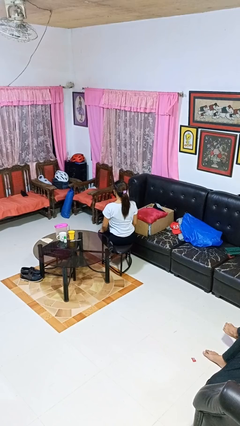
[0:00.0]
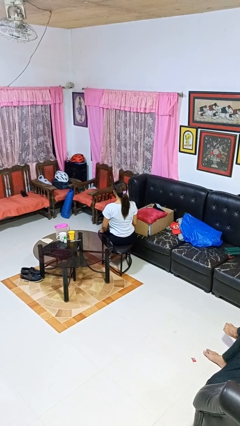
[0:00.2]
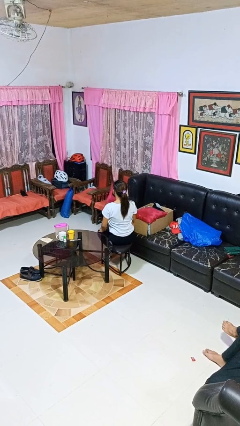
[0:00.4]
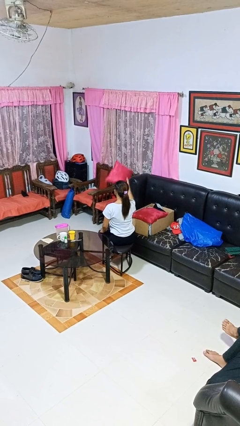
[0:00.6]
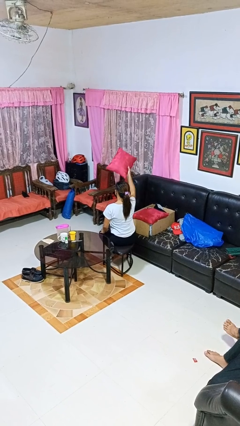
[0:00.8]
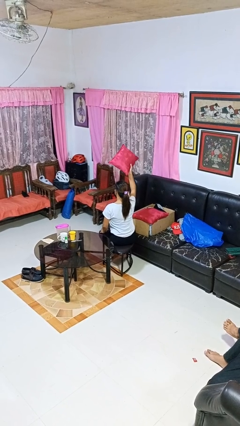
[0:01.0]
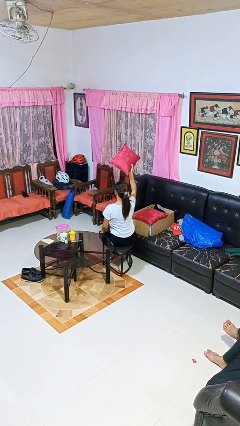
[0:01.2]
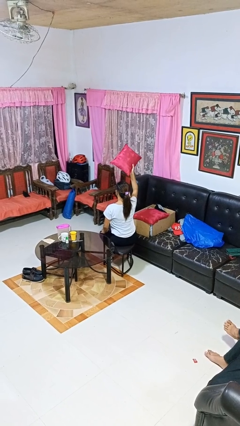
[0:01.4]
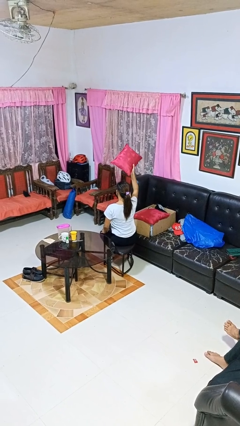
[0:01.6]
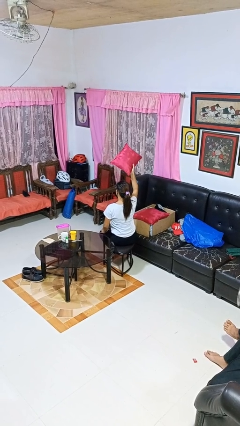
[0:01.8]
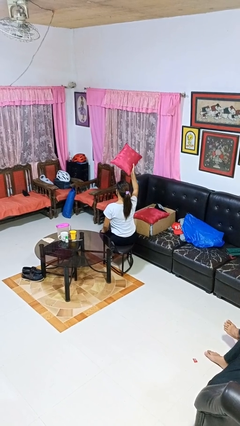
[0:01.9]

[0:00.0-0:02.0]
person holds object above head

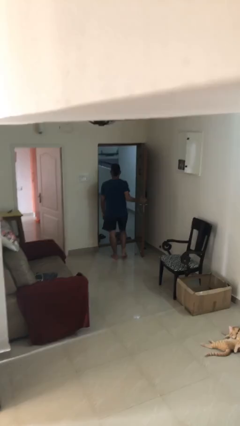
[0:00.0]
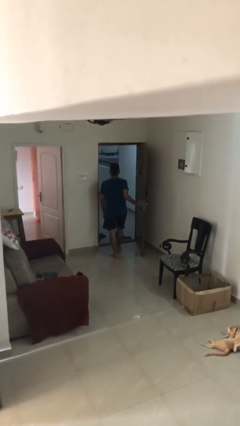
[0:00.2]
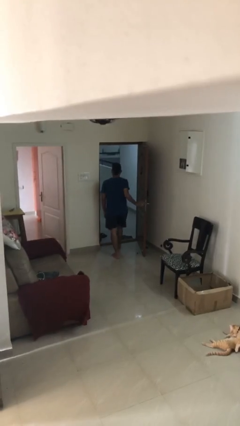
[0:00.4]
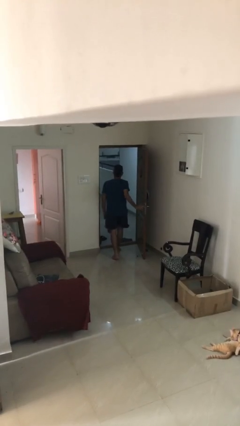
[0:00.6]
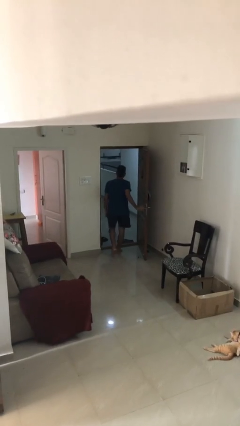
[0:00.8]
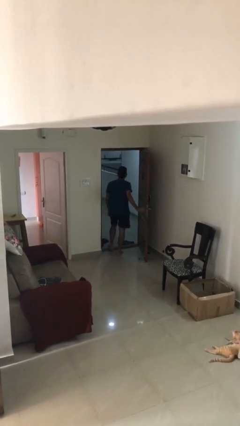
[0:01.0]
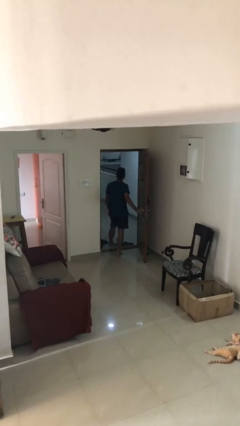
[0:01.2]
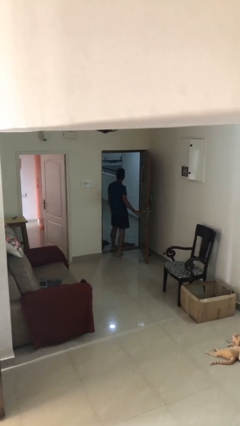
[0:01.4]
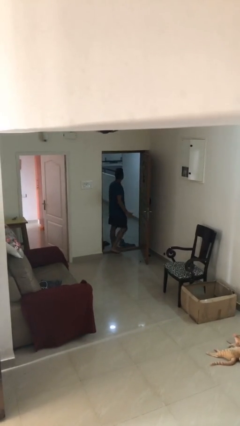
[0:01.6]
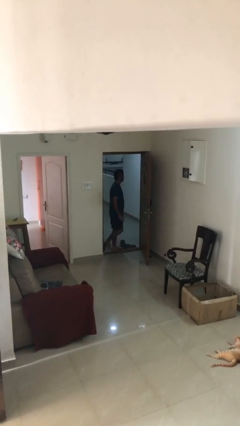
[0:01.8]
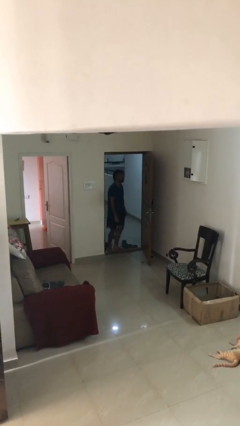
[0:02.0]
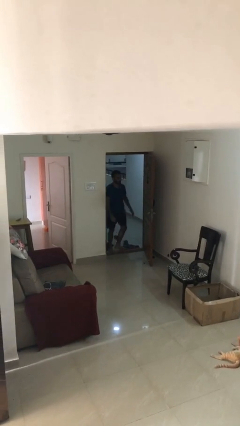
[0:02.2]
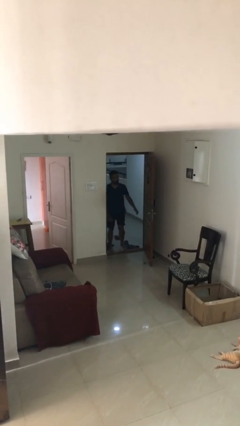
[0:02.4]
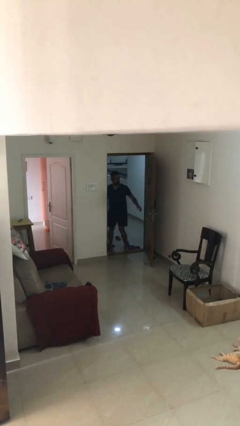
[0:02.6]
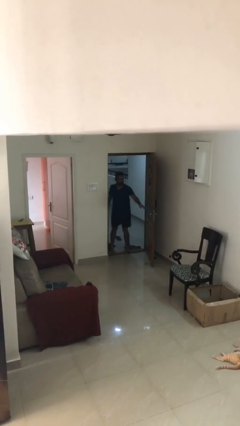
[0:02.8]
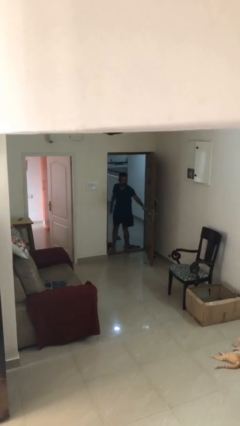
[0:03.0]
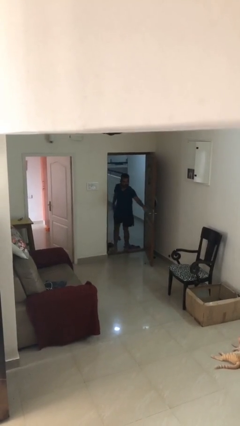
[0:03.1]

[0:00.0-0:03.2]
person exits scene through structure

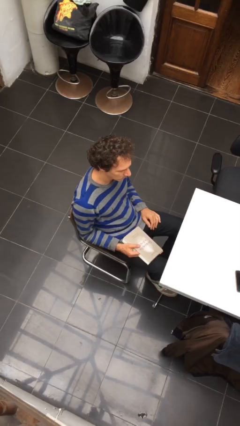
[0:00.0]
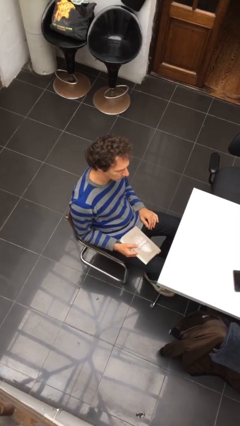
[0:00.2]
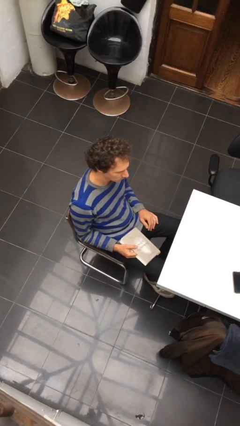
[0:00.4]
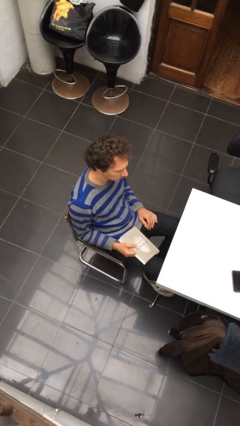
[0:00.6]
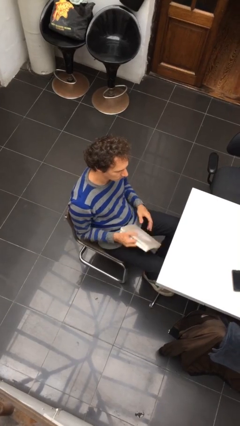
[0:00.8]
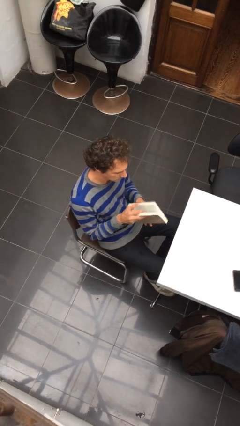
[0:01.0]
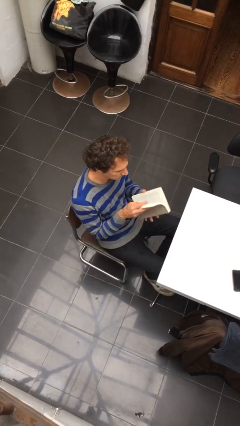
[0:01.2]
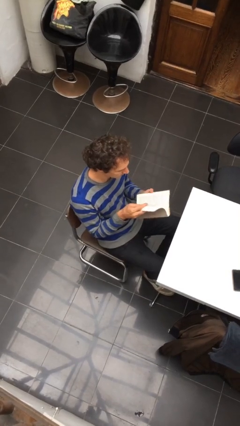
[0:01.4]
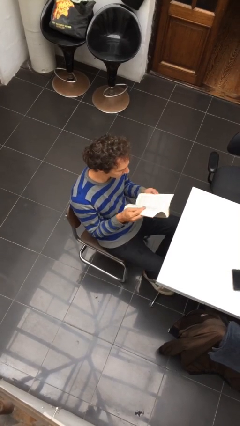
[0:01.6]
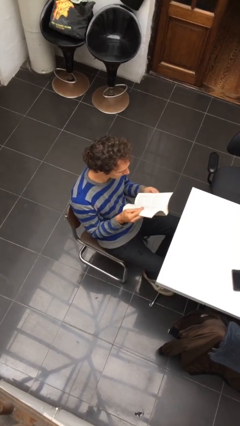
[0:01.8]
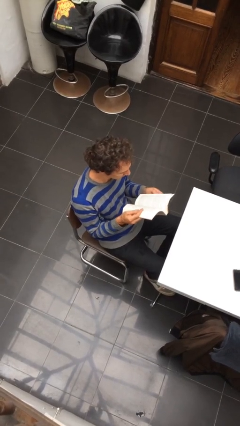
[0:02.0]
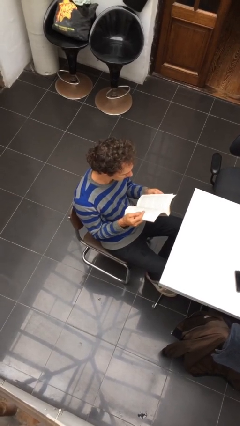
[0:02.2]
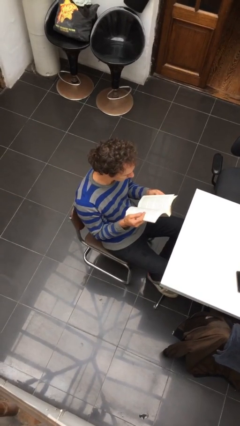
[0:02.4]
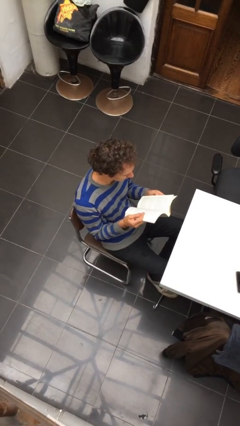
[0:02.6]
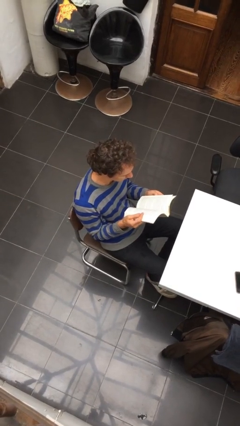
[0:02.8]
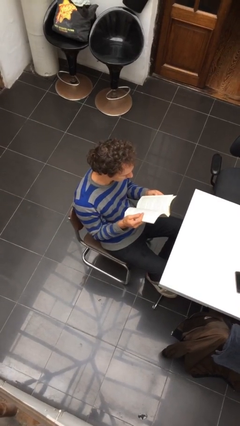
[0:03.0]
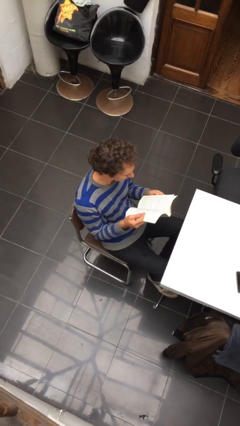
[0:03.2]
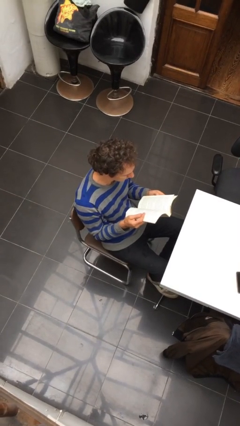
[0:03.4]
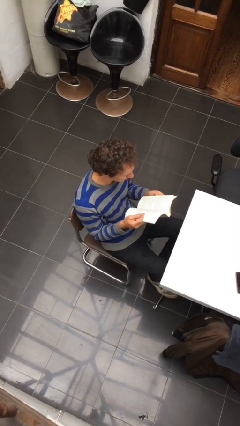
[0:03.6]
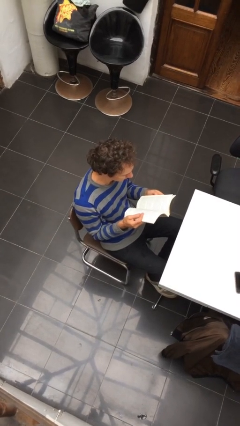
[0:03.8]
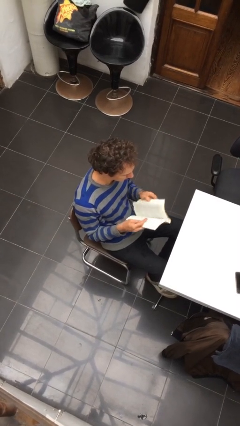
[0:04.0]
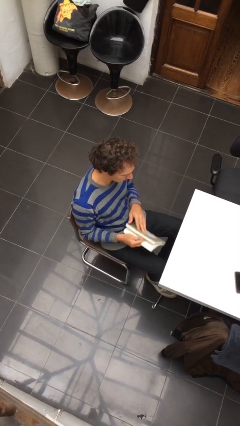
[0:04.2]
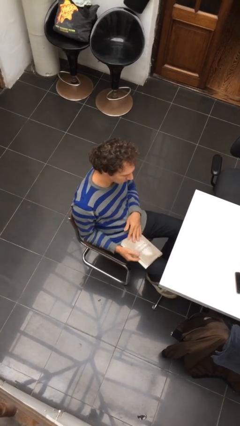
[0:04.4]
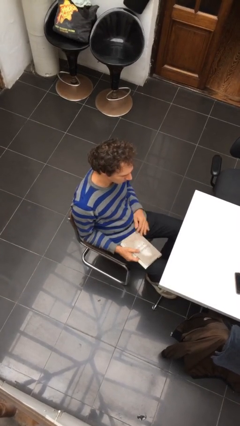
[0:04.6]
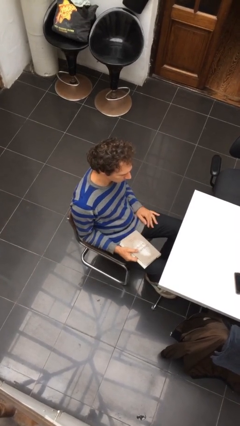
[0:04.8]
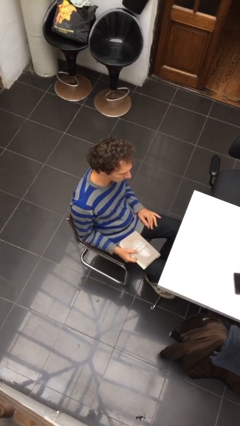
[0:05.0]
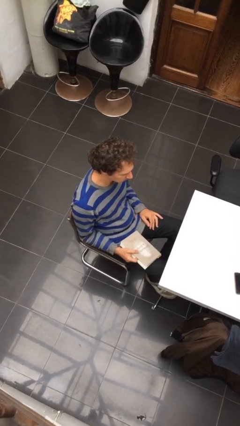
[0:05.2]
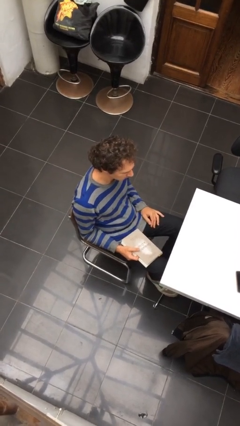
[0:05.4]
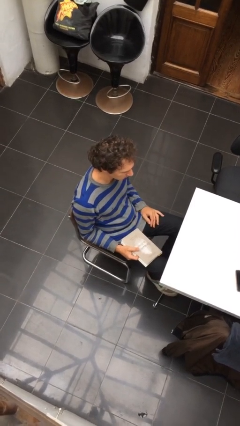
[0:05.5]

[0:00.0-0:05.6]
person reads document

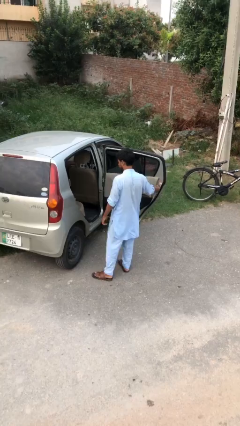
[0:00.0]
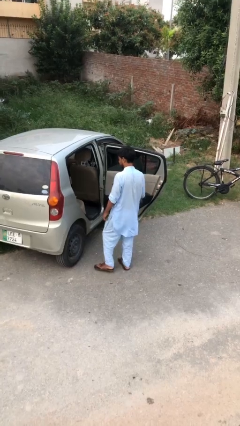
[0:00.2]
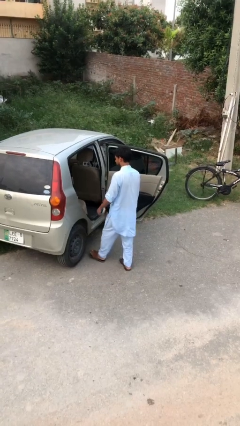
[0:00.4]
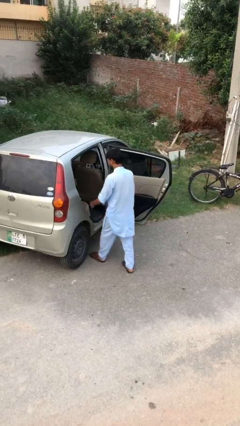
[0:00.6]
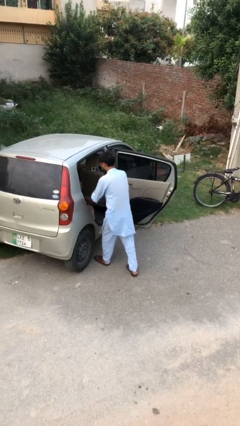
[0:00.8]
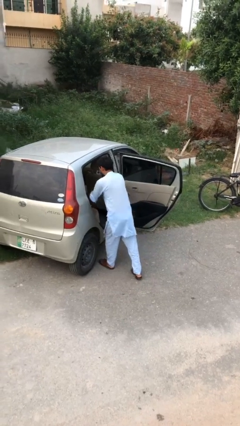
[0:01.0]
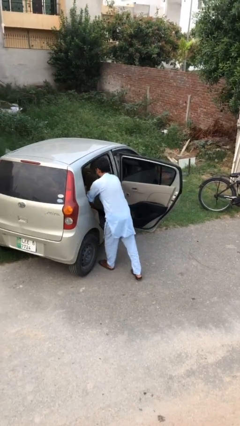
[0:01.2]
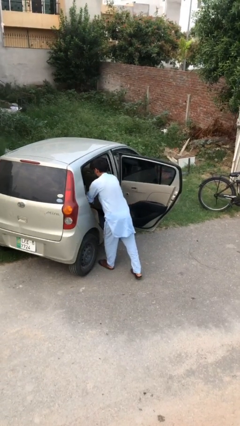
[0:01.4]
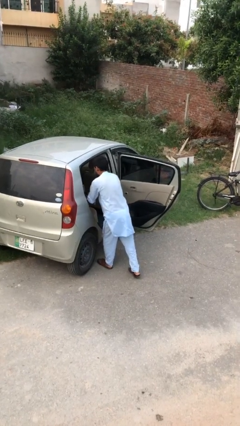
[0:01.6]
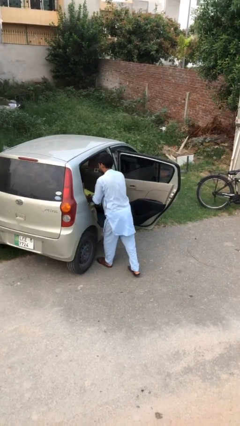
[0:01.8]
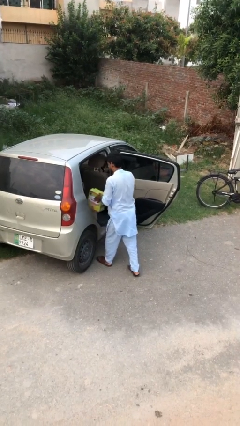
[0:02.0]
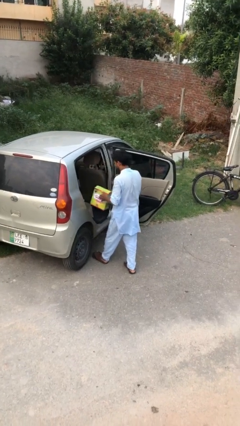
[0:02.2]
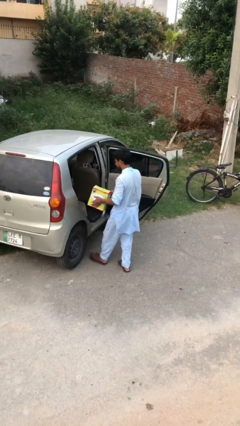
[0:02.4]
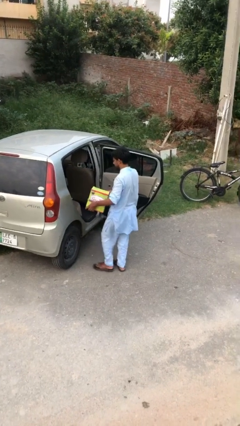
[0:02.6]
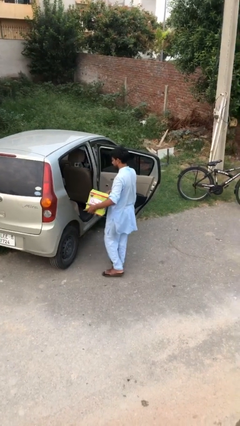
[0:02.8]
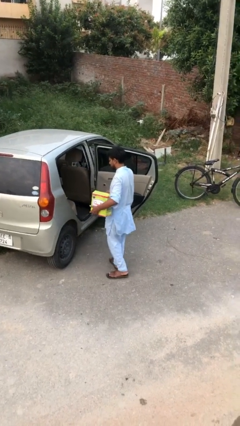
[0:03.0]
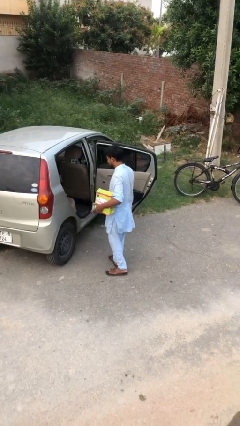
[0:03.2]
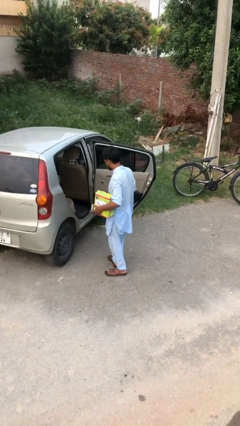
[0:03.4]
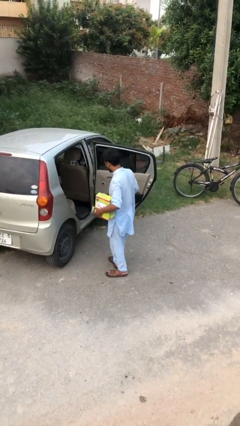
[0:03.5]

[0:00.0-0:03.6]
person unloads car

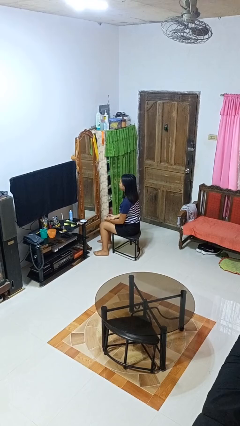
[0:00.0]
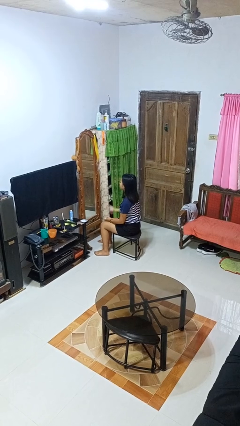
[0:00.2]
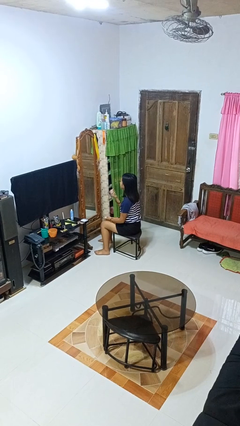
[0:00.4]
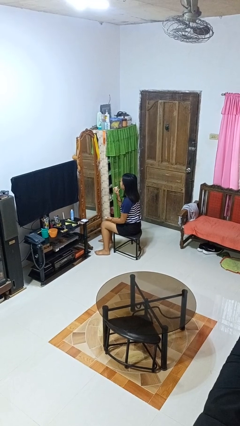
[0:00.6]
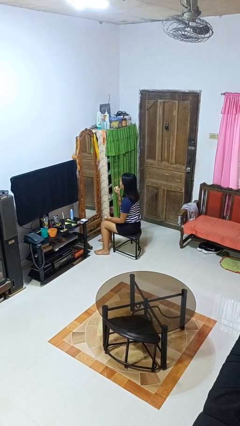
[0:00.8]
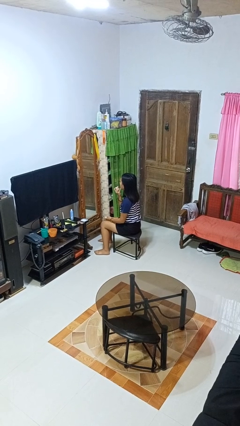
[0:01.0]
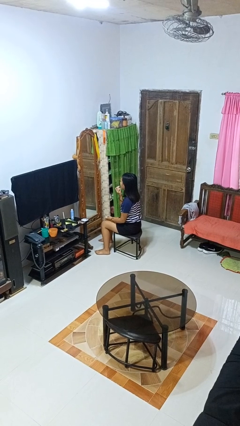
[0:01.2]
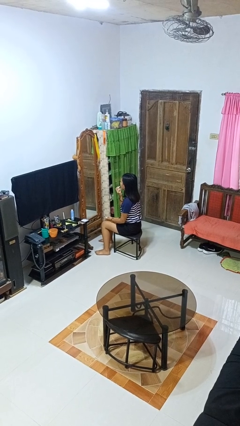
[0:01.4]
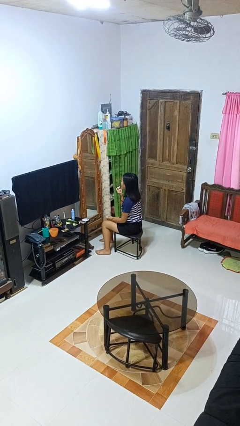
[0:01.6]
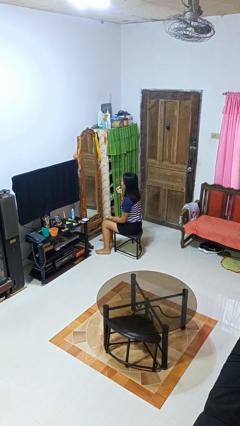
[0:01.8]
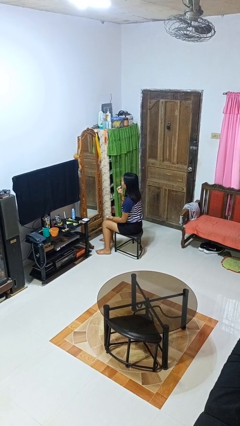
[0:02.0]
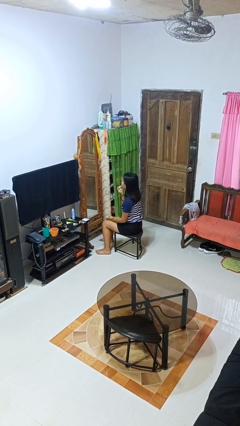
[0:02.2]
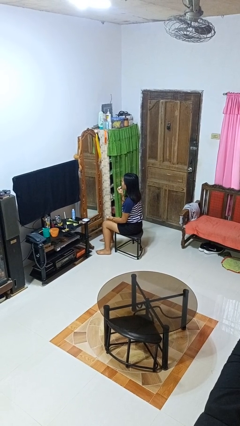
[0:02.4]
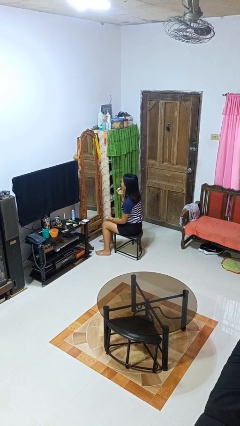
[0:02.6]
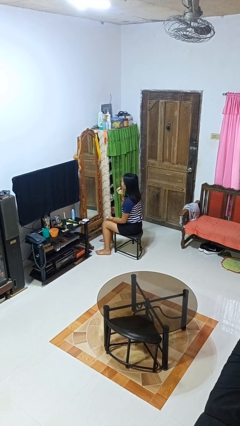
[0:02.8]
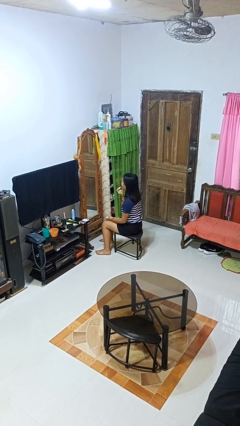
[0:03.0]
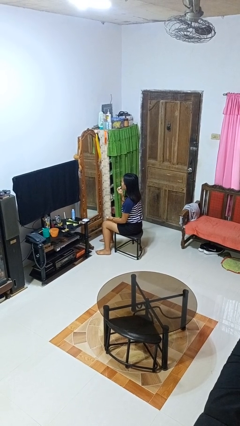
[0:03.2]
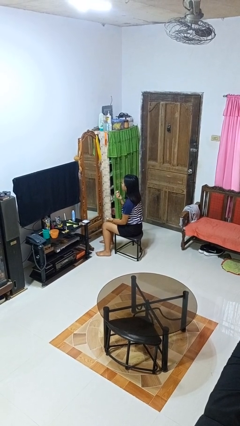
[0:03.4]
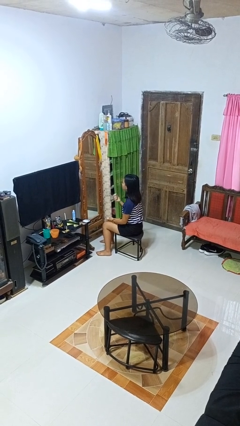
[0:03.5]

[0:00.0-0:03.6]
person applies lip makeup
